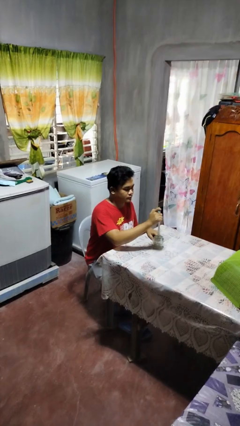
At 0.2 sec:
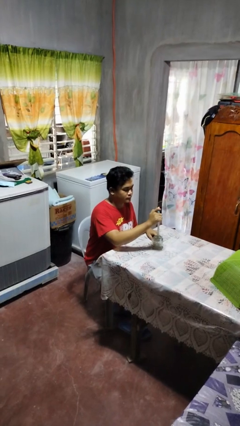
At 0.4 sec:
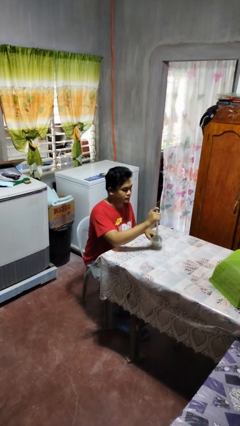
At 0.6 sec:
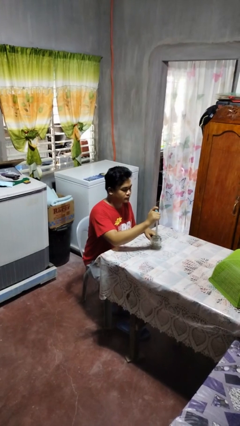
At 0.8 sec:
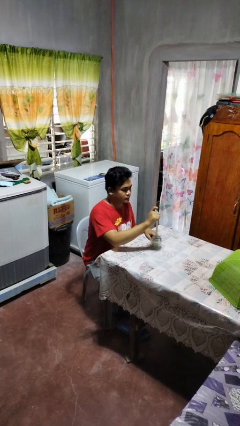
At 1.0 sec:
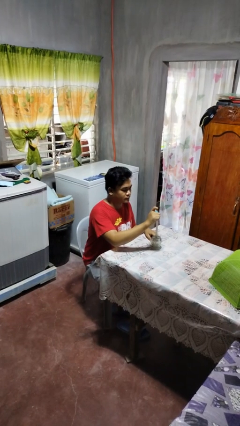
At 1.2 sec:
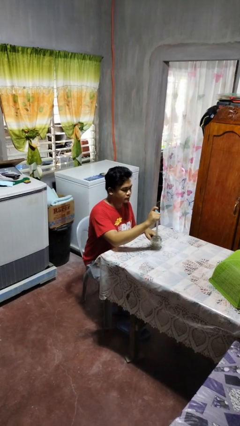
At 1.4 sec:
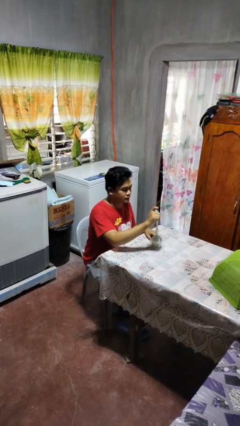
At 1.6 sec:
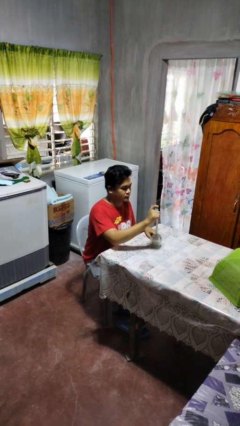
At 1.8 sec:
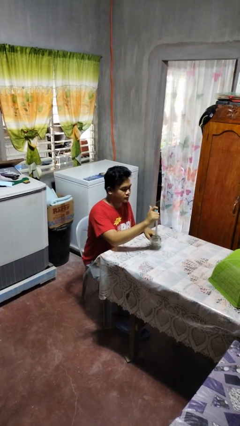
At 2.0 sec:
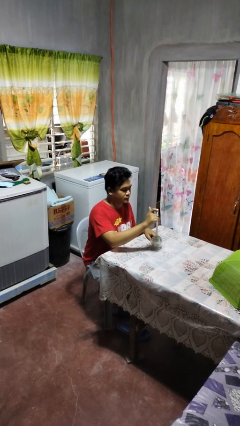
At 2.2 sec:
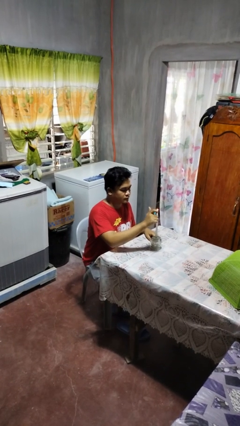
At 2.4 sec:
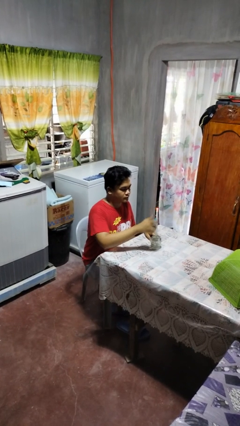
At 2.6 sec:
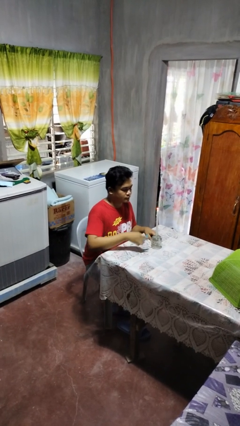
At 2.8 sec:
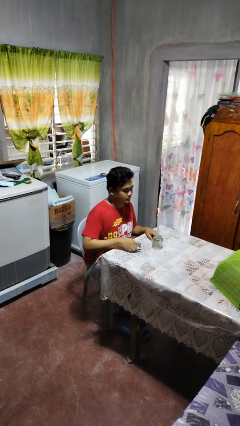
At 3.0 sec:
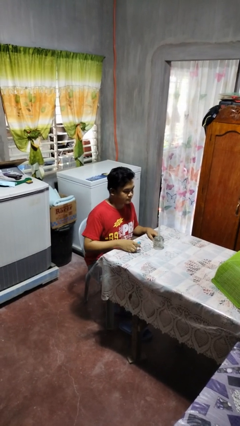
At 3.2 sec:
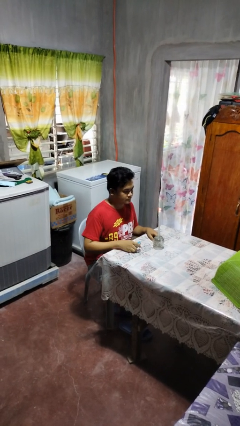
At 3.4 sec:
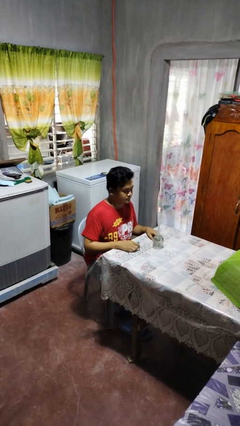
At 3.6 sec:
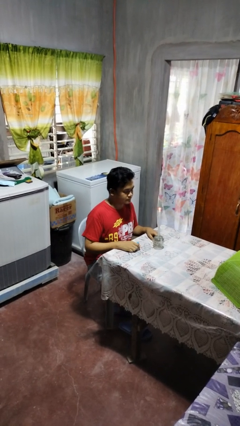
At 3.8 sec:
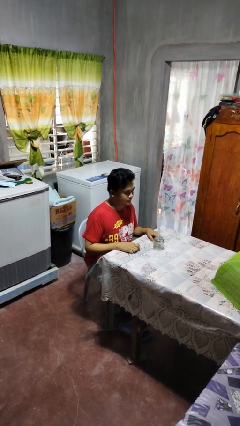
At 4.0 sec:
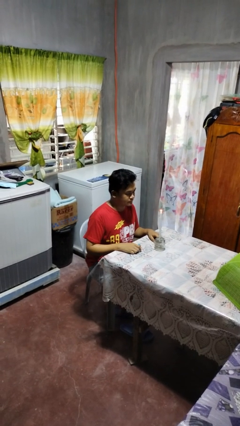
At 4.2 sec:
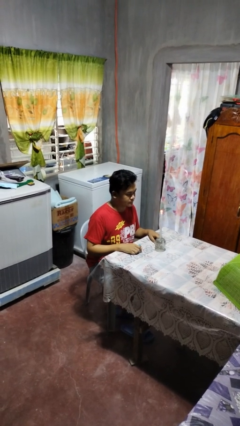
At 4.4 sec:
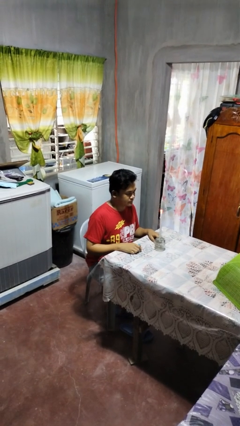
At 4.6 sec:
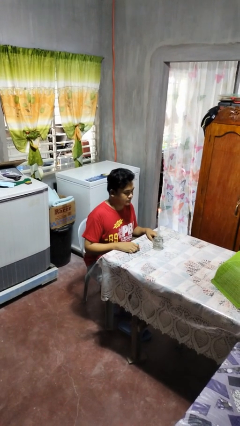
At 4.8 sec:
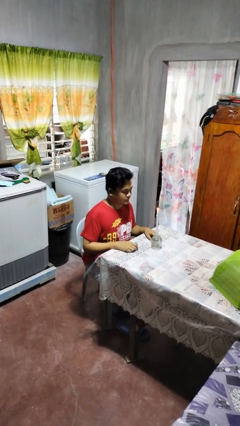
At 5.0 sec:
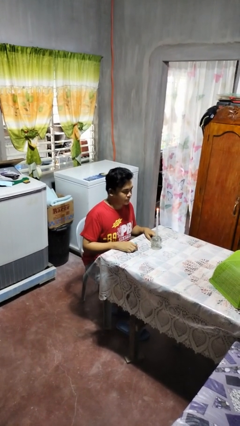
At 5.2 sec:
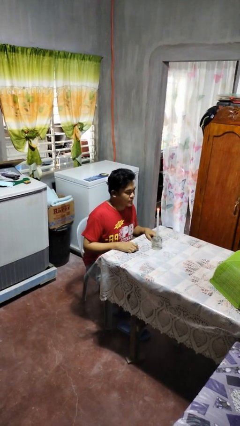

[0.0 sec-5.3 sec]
person lights candle

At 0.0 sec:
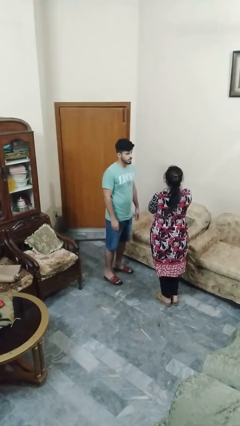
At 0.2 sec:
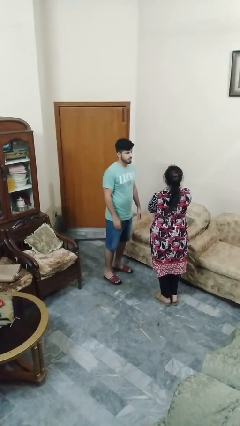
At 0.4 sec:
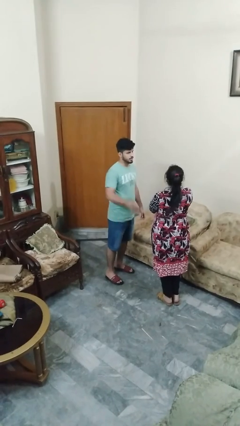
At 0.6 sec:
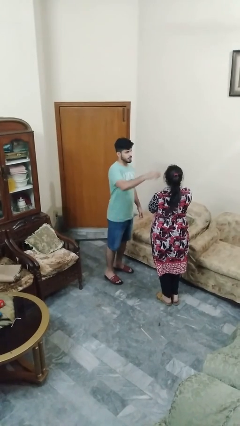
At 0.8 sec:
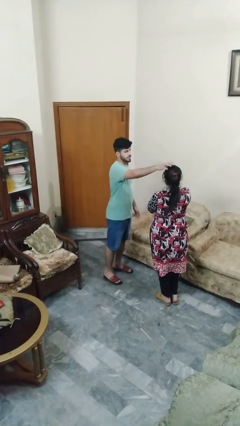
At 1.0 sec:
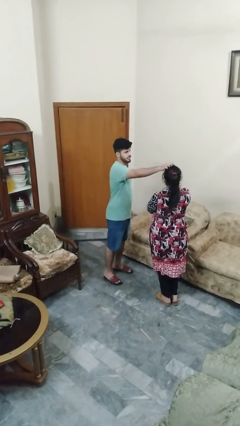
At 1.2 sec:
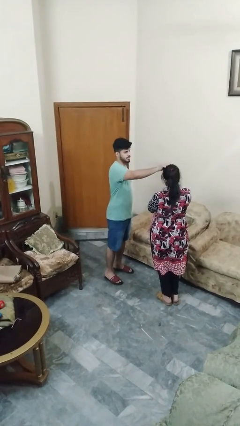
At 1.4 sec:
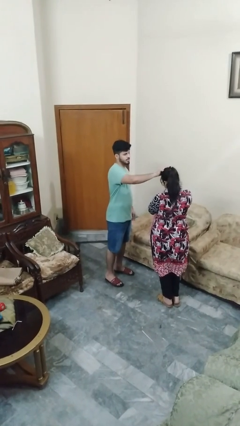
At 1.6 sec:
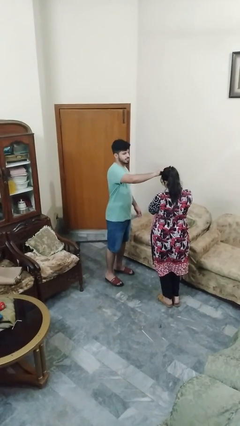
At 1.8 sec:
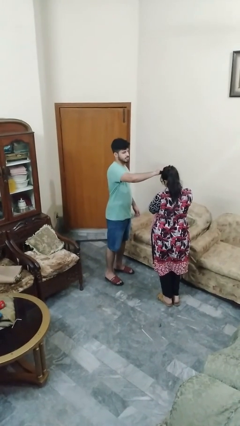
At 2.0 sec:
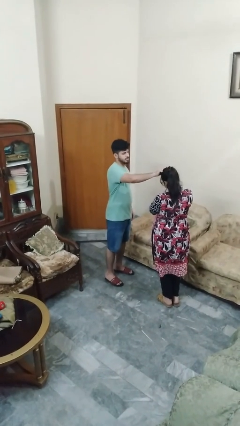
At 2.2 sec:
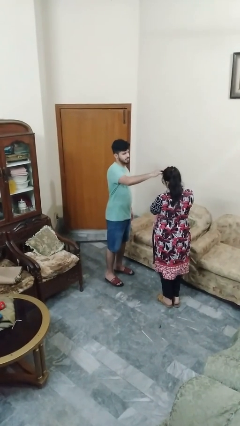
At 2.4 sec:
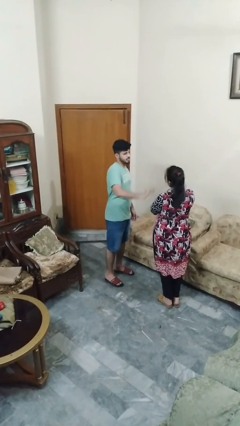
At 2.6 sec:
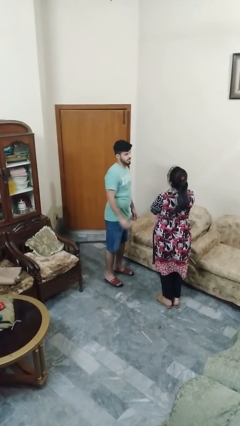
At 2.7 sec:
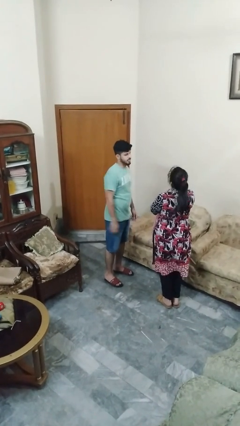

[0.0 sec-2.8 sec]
person grabs person by hair

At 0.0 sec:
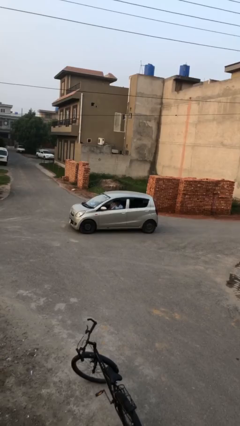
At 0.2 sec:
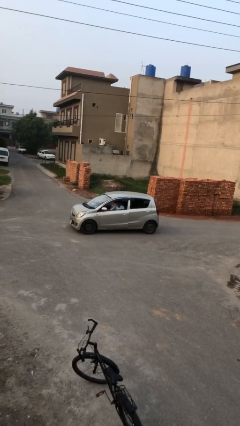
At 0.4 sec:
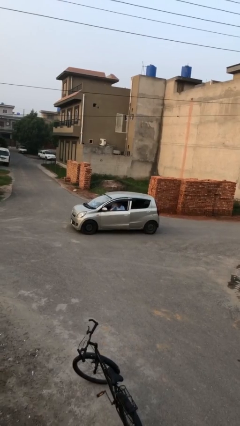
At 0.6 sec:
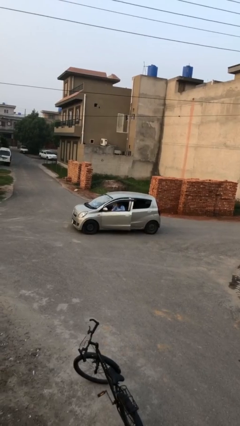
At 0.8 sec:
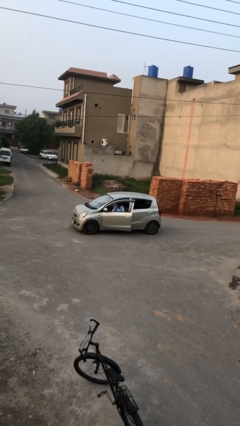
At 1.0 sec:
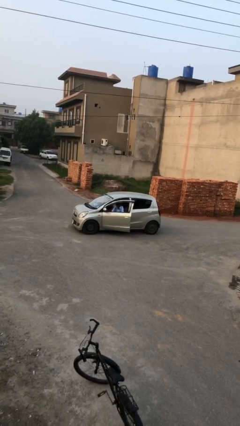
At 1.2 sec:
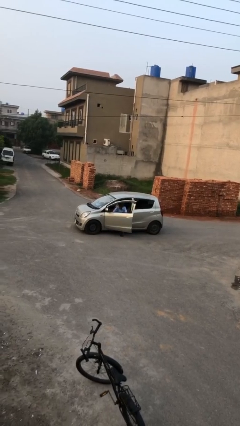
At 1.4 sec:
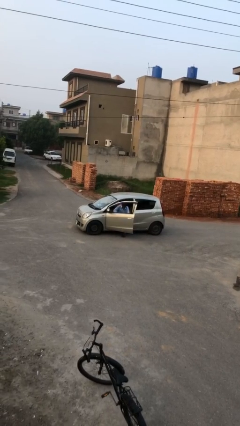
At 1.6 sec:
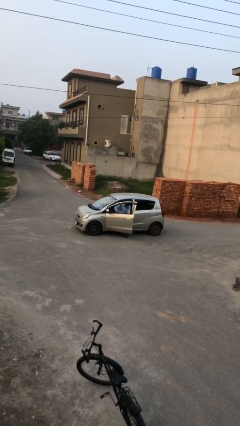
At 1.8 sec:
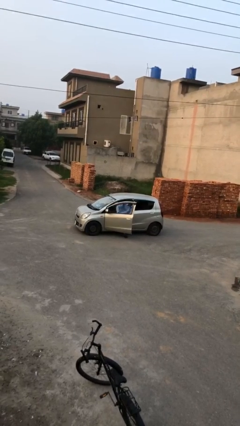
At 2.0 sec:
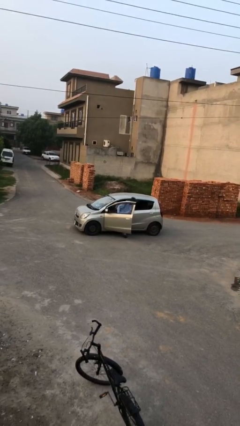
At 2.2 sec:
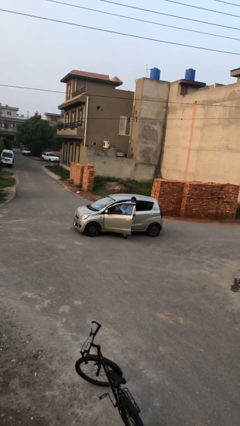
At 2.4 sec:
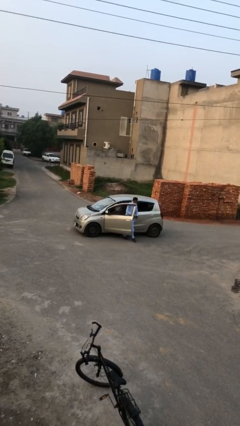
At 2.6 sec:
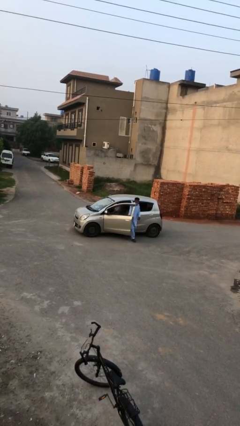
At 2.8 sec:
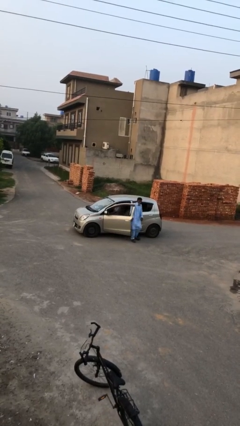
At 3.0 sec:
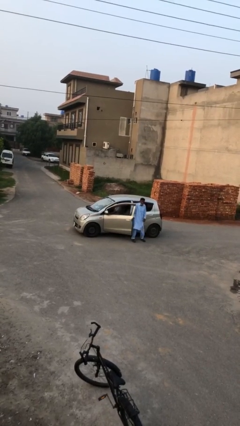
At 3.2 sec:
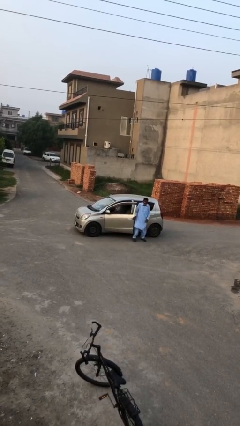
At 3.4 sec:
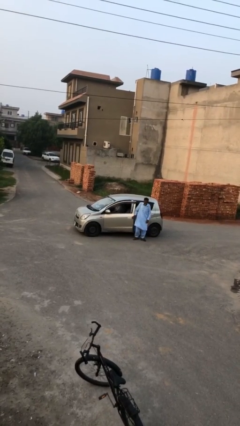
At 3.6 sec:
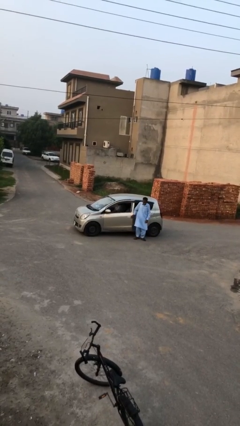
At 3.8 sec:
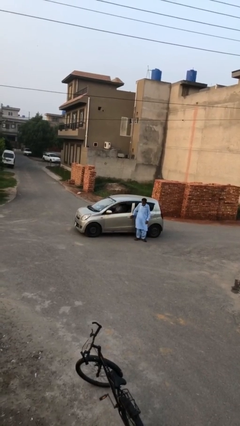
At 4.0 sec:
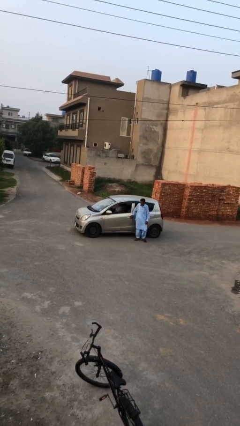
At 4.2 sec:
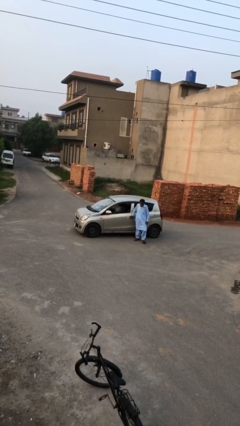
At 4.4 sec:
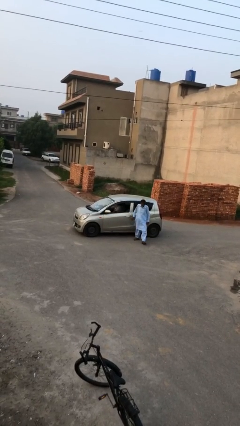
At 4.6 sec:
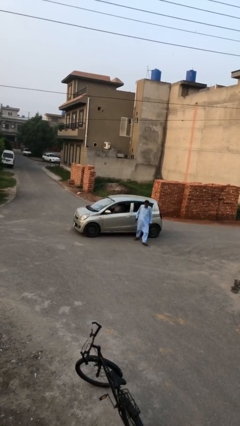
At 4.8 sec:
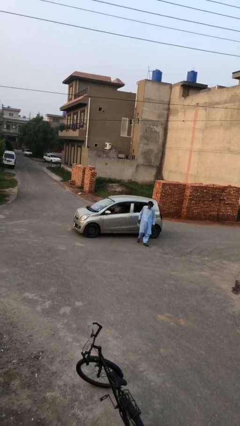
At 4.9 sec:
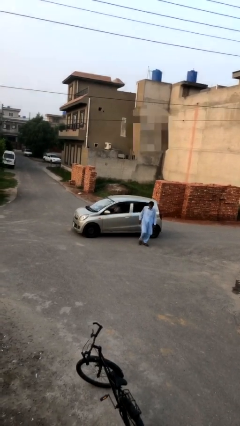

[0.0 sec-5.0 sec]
car drops off person

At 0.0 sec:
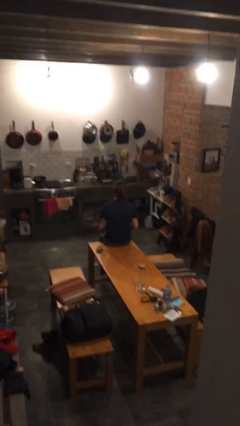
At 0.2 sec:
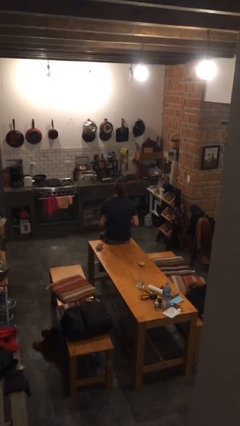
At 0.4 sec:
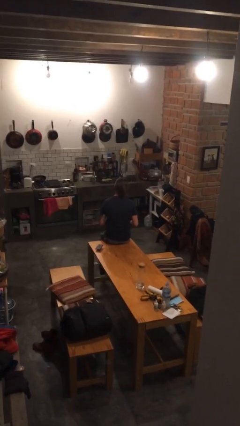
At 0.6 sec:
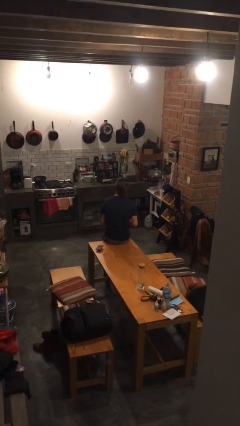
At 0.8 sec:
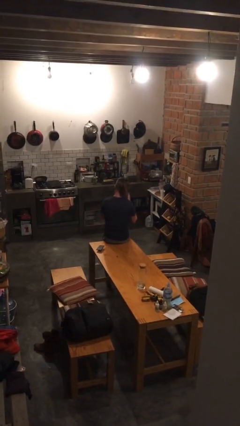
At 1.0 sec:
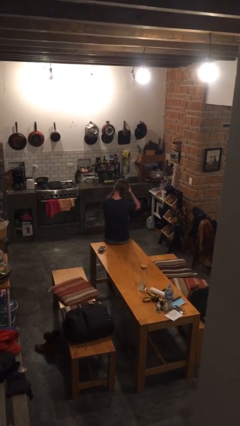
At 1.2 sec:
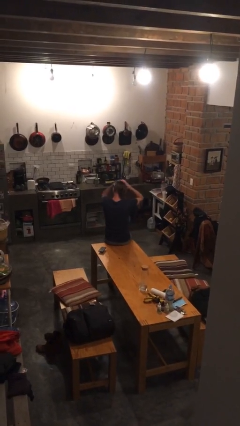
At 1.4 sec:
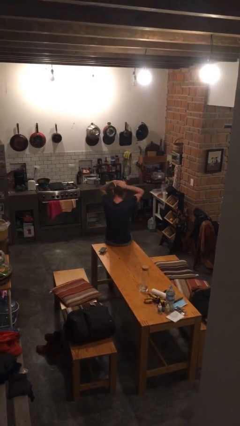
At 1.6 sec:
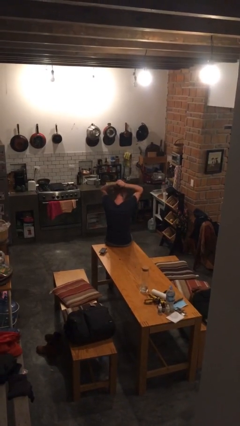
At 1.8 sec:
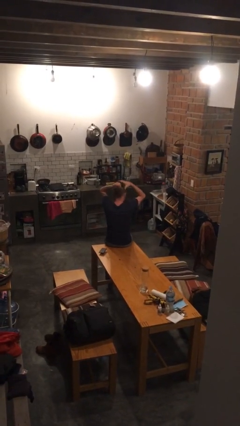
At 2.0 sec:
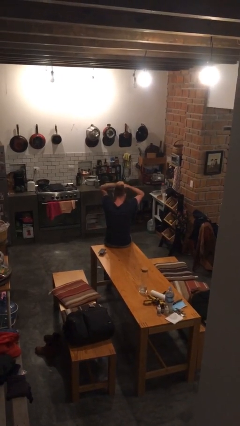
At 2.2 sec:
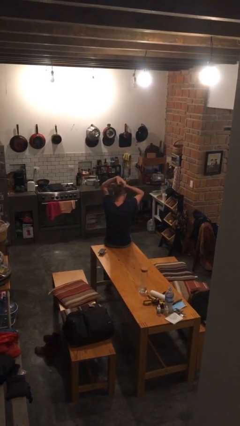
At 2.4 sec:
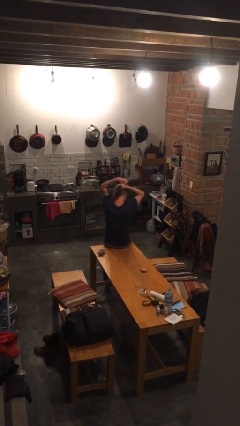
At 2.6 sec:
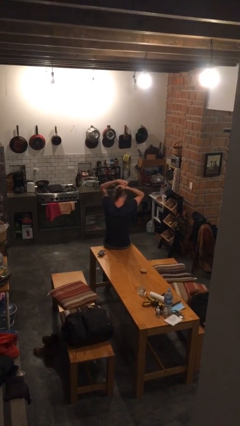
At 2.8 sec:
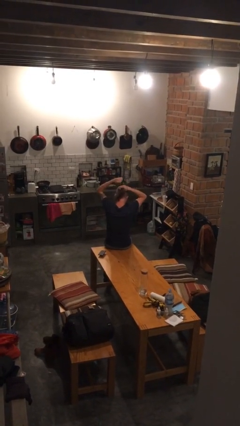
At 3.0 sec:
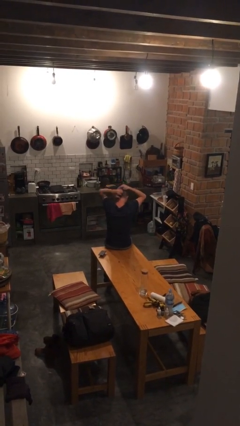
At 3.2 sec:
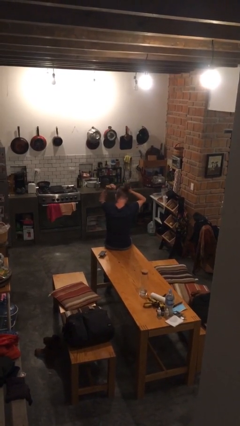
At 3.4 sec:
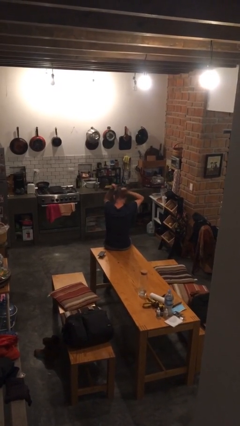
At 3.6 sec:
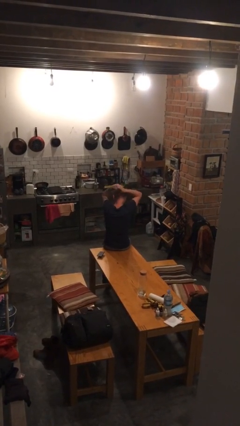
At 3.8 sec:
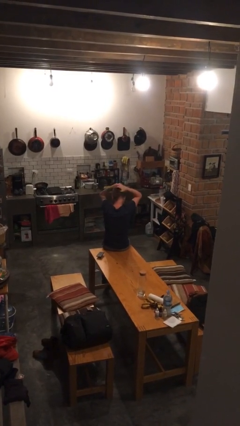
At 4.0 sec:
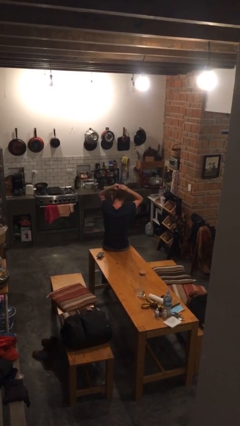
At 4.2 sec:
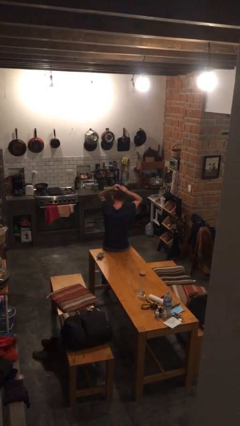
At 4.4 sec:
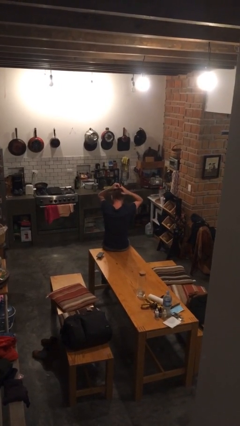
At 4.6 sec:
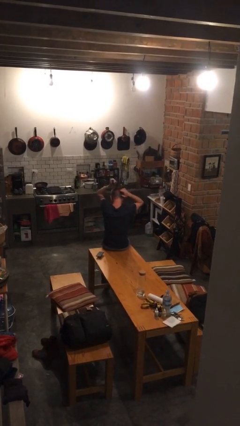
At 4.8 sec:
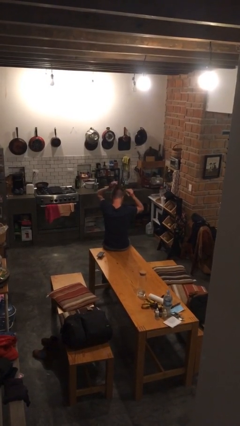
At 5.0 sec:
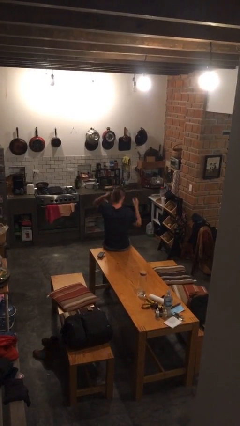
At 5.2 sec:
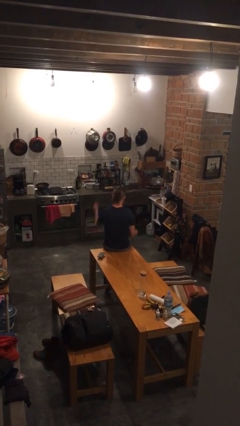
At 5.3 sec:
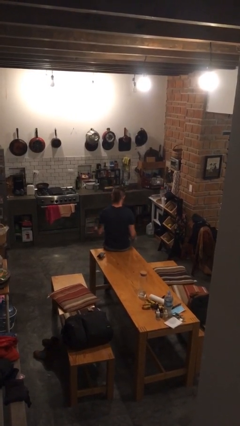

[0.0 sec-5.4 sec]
person puts hair in ponytail
